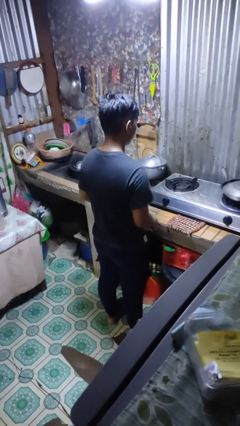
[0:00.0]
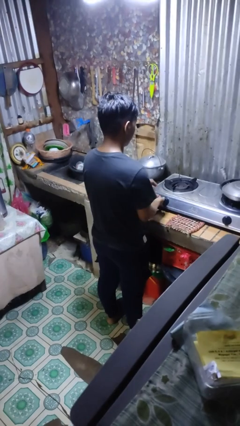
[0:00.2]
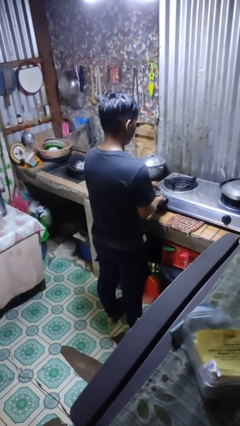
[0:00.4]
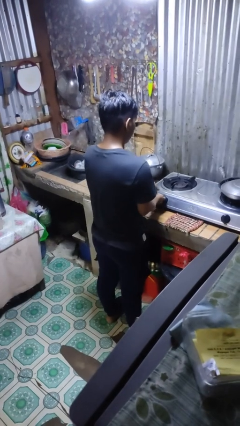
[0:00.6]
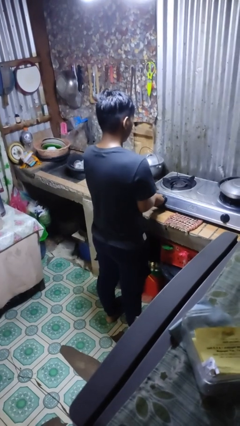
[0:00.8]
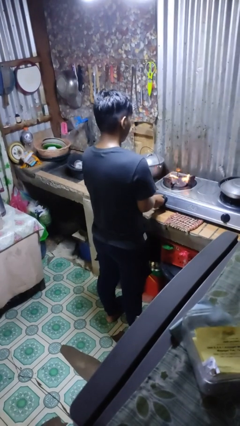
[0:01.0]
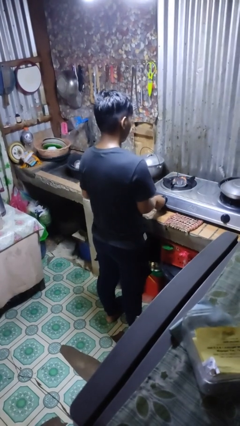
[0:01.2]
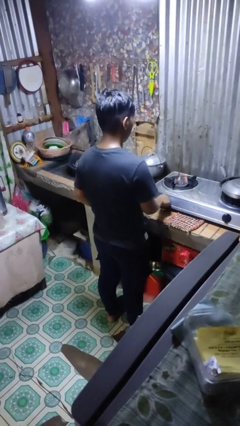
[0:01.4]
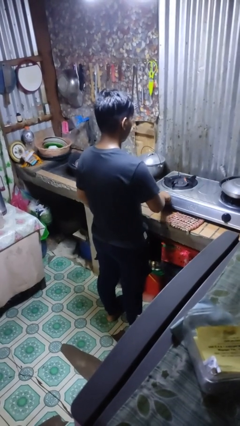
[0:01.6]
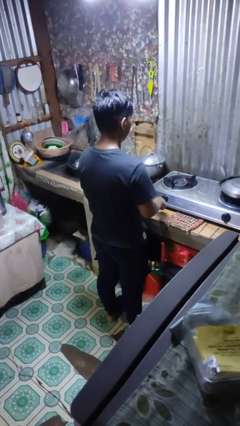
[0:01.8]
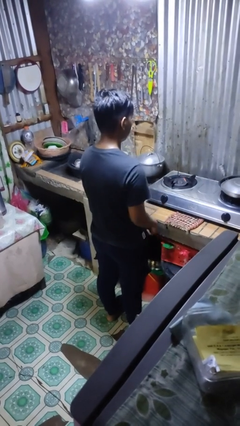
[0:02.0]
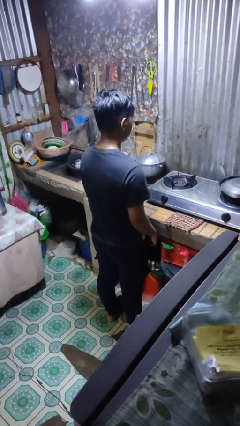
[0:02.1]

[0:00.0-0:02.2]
person turns on stovetop

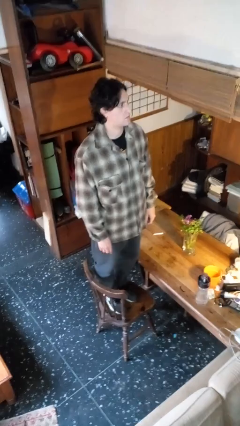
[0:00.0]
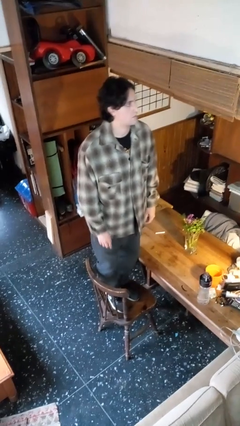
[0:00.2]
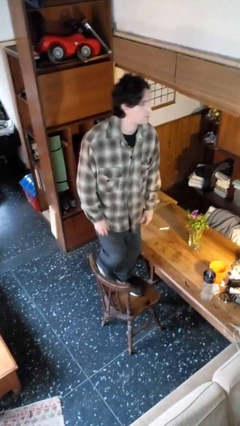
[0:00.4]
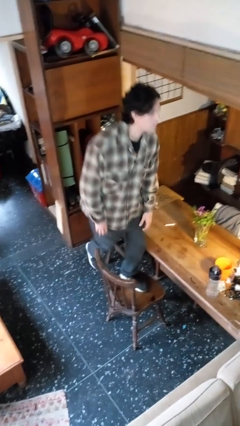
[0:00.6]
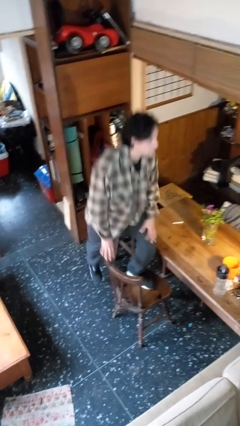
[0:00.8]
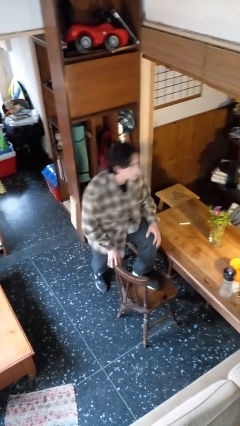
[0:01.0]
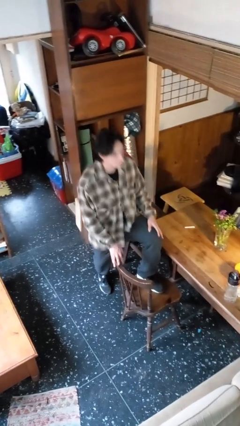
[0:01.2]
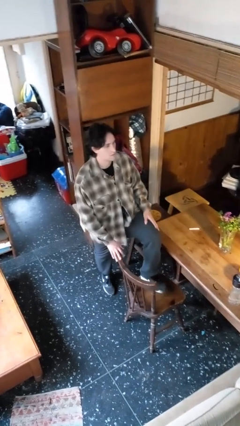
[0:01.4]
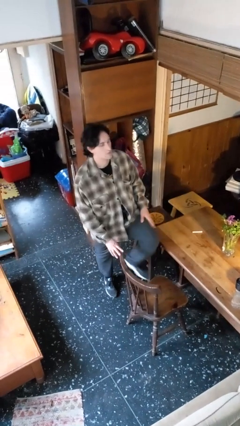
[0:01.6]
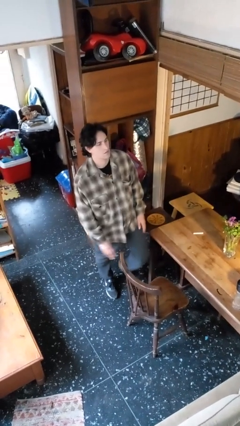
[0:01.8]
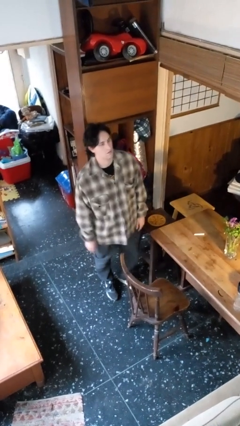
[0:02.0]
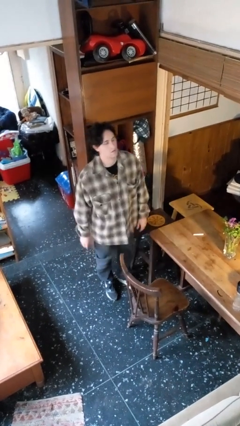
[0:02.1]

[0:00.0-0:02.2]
person climbs off chair

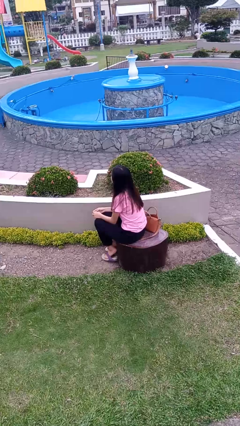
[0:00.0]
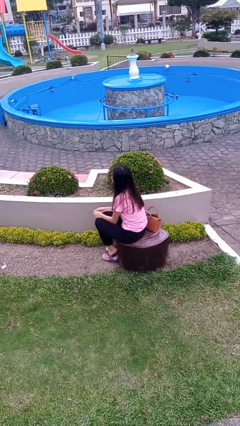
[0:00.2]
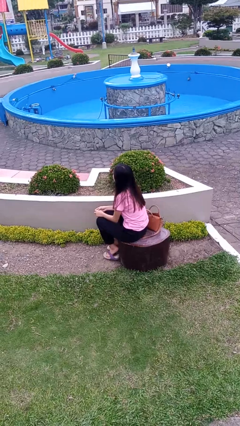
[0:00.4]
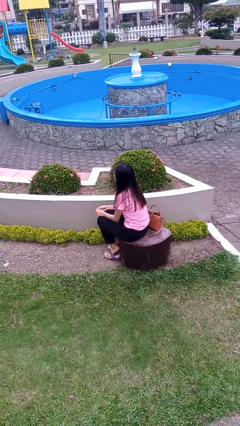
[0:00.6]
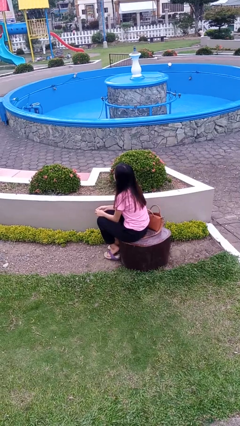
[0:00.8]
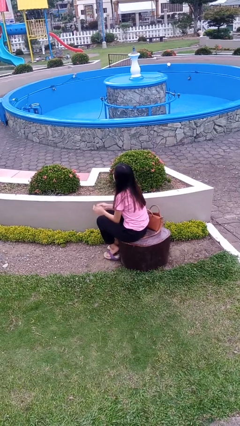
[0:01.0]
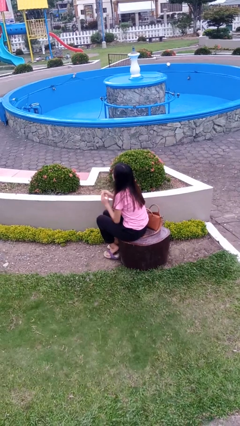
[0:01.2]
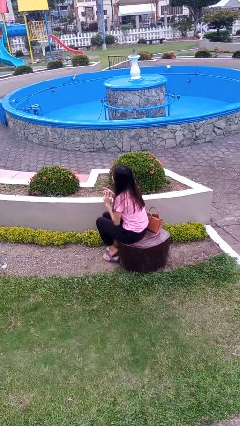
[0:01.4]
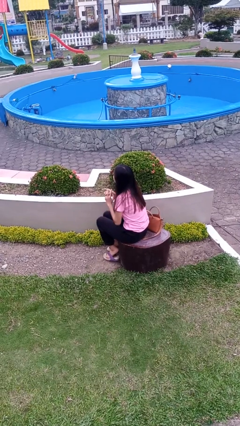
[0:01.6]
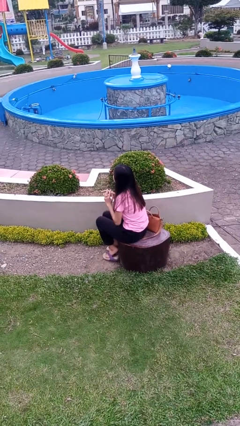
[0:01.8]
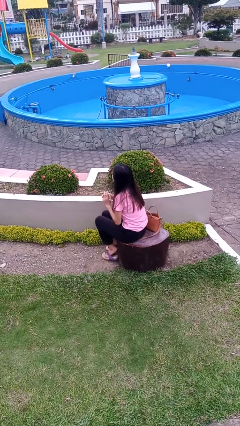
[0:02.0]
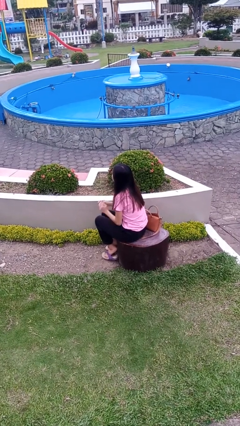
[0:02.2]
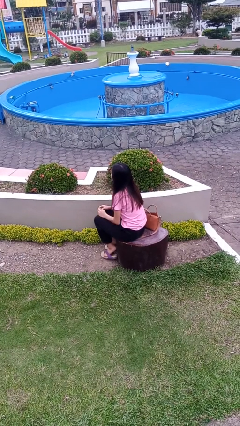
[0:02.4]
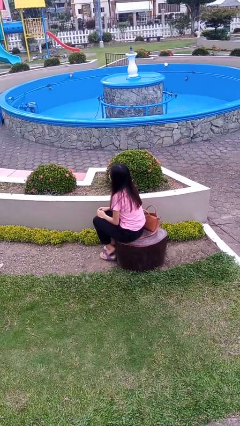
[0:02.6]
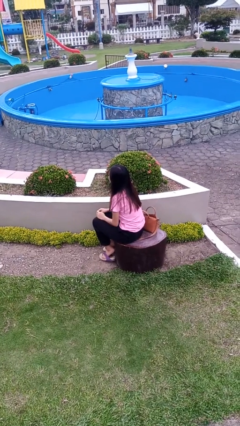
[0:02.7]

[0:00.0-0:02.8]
person puts on ring

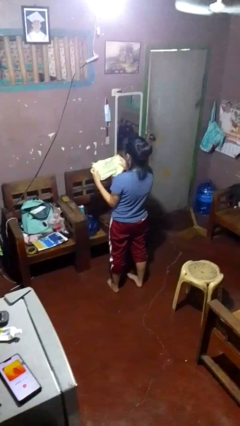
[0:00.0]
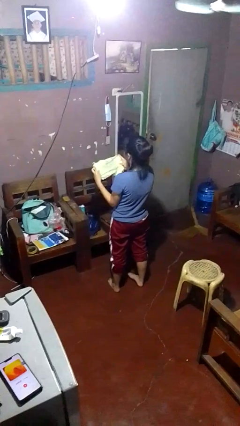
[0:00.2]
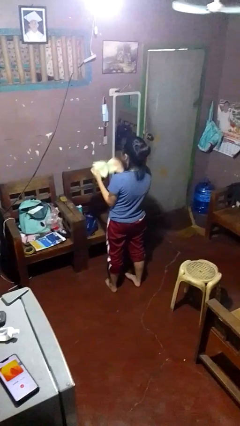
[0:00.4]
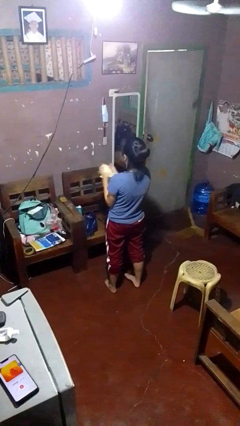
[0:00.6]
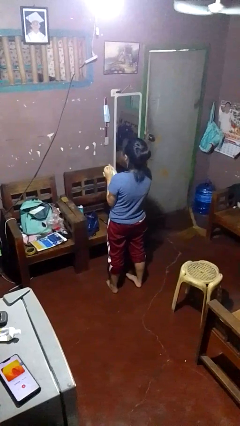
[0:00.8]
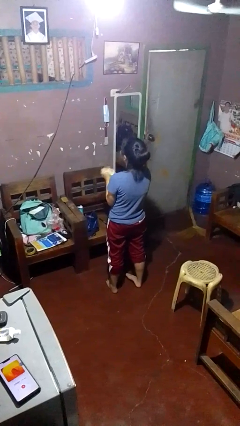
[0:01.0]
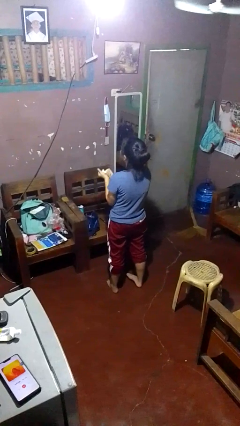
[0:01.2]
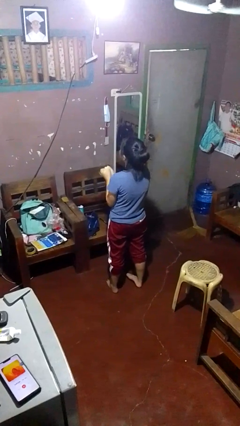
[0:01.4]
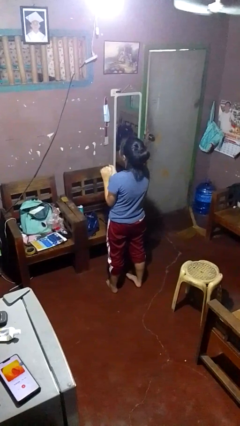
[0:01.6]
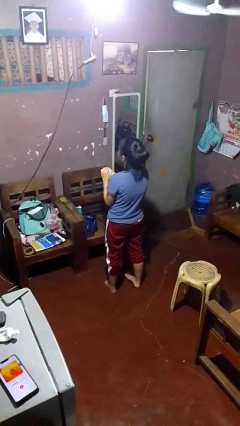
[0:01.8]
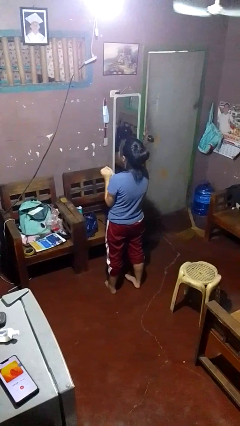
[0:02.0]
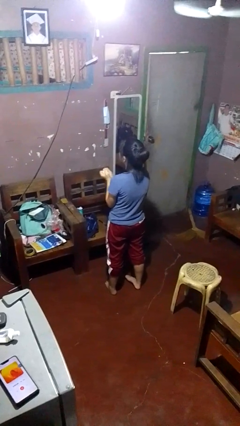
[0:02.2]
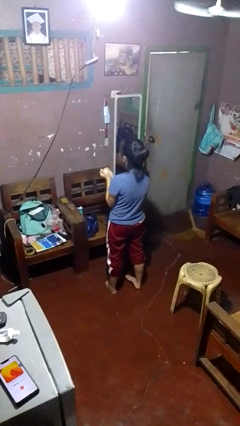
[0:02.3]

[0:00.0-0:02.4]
person crumples paper

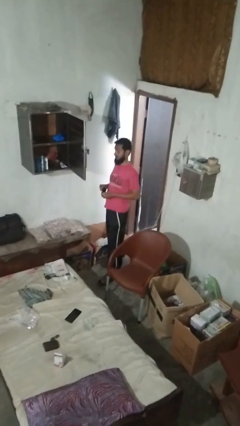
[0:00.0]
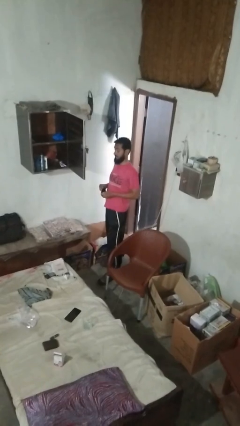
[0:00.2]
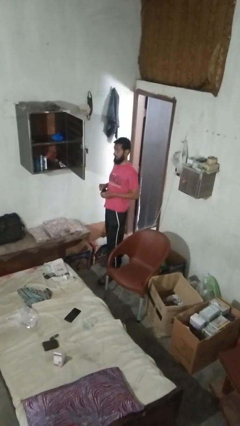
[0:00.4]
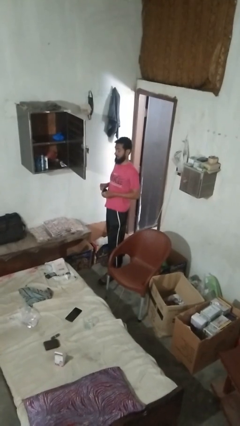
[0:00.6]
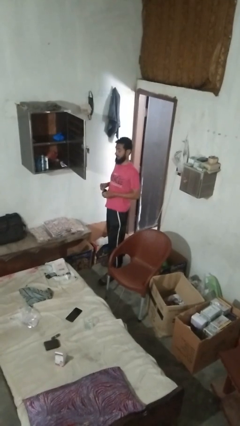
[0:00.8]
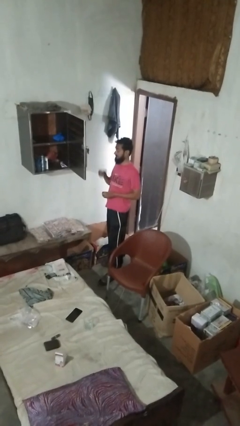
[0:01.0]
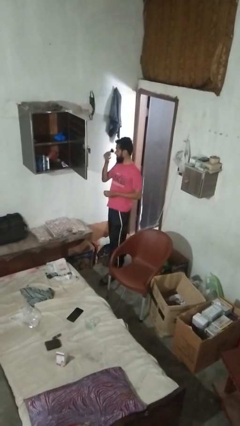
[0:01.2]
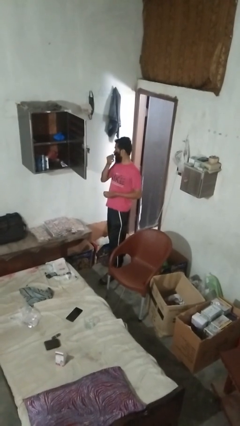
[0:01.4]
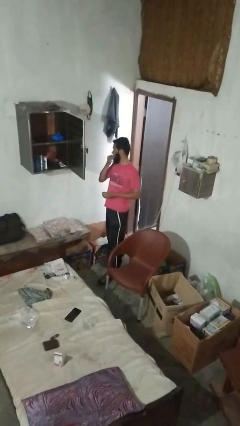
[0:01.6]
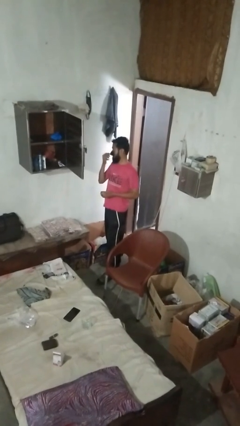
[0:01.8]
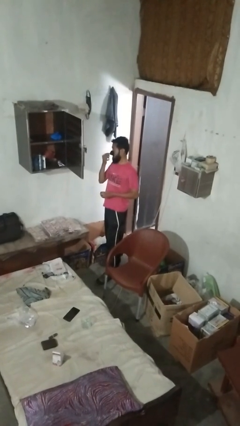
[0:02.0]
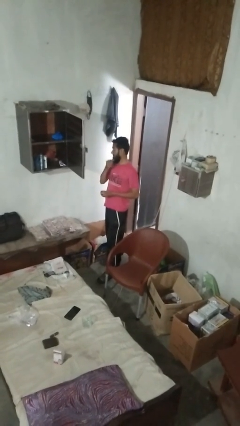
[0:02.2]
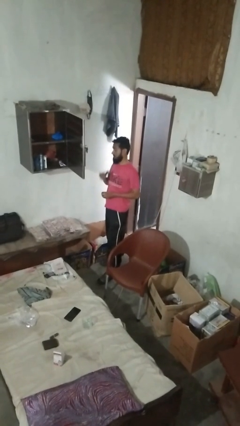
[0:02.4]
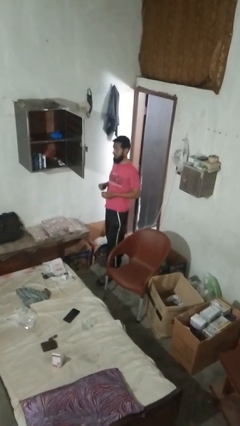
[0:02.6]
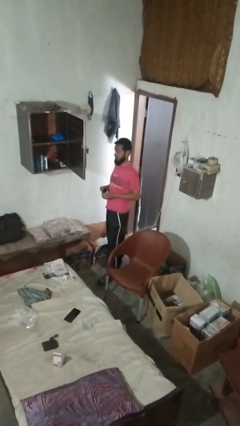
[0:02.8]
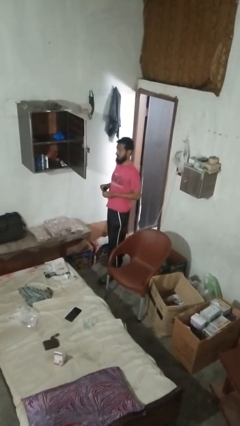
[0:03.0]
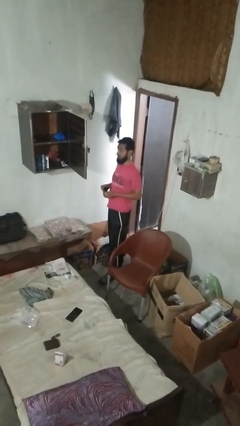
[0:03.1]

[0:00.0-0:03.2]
person applies foundation makeup

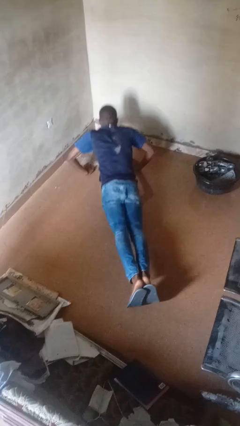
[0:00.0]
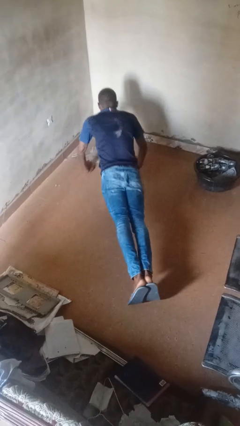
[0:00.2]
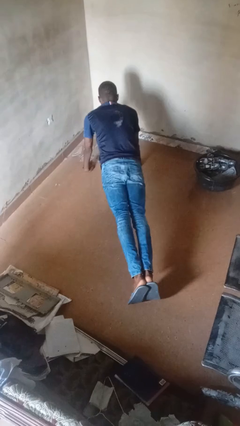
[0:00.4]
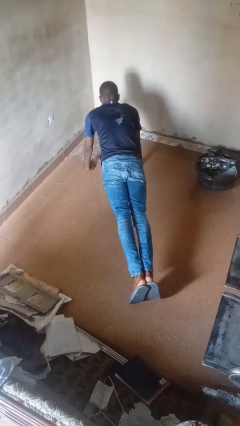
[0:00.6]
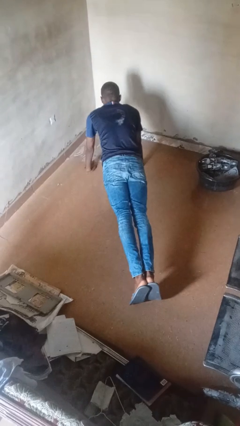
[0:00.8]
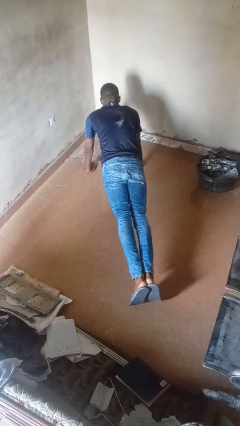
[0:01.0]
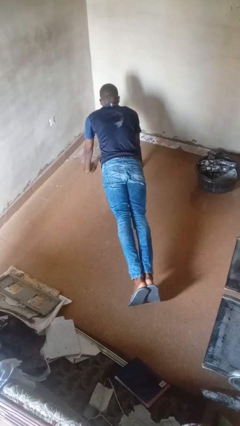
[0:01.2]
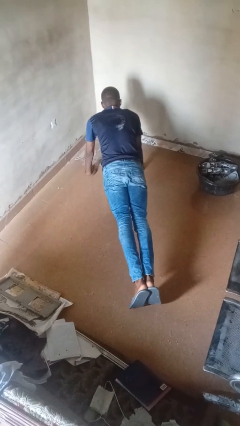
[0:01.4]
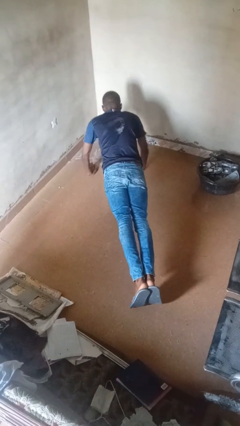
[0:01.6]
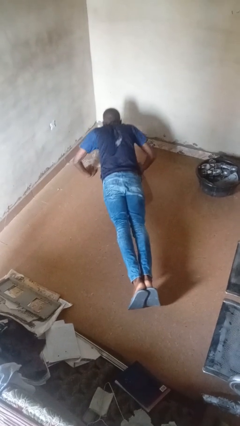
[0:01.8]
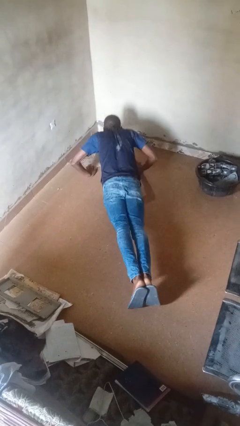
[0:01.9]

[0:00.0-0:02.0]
person exercises with pushup

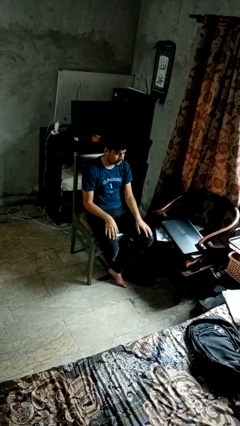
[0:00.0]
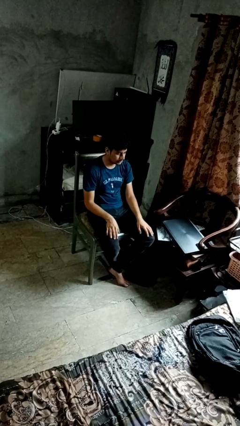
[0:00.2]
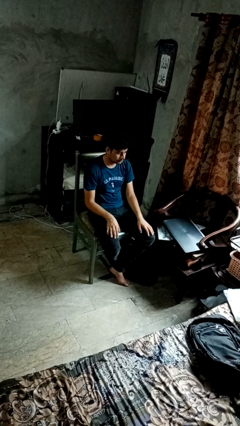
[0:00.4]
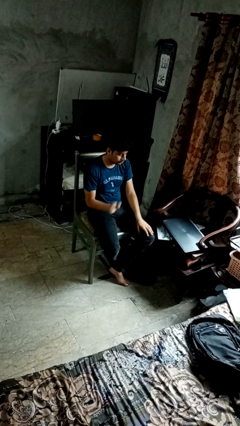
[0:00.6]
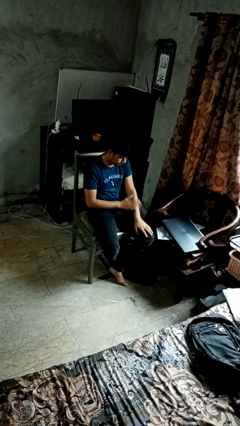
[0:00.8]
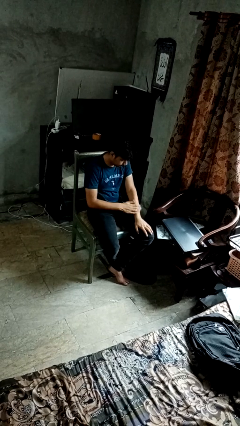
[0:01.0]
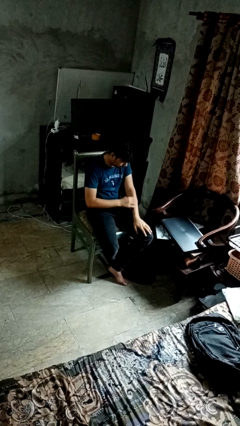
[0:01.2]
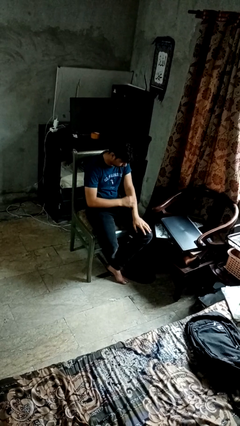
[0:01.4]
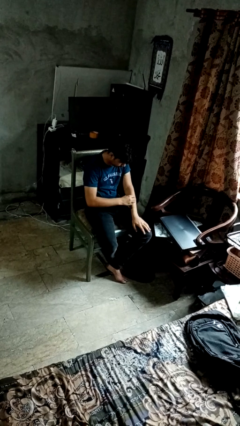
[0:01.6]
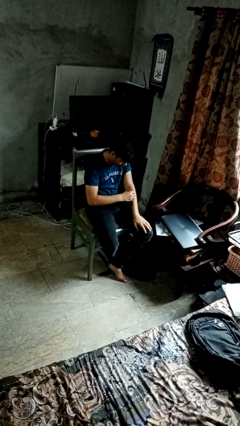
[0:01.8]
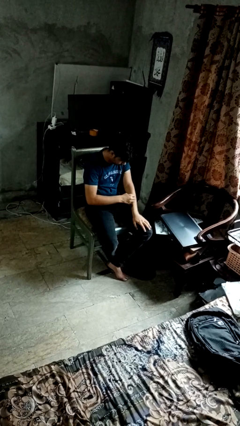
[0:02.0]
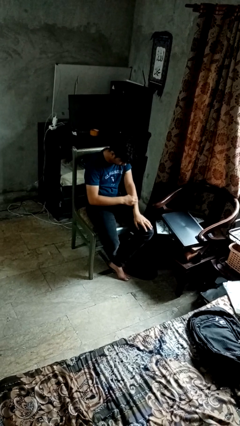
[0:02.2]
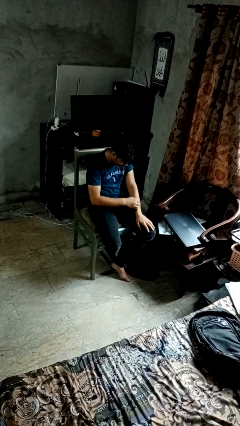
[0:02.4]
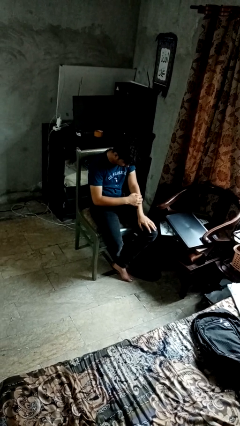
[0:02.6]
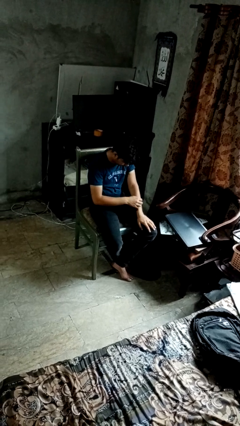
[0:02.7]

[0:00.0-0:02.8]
person swats bug
